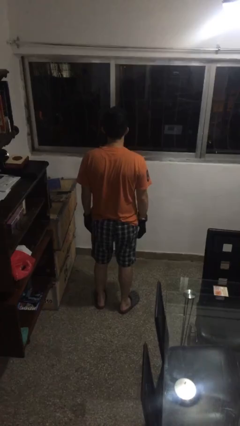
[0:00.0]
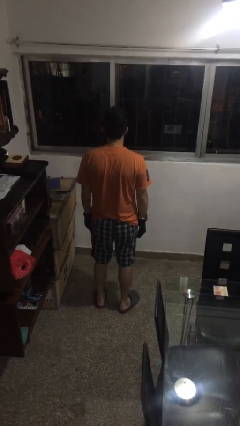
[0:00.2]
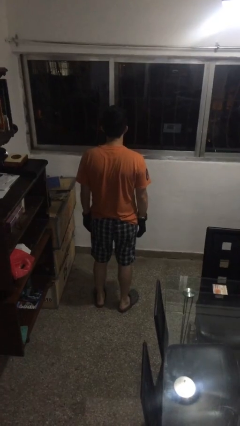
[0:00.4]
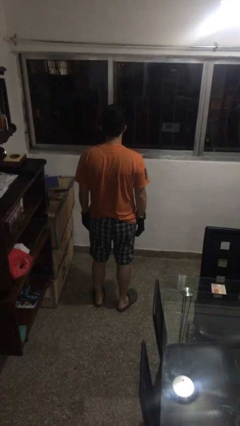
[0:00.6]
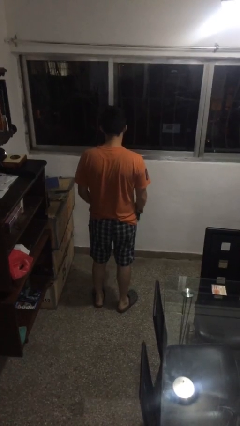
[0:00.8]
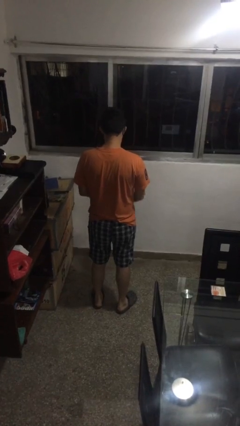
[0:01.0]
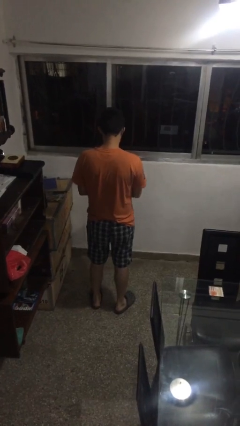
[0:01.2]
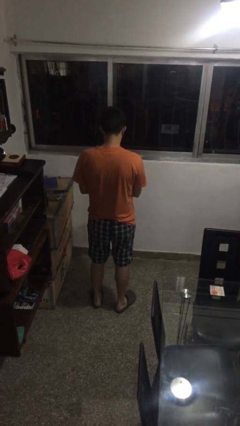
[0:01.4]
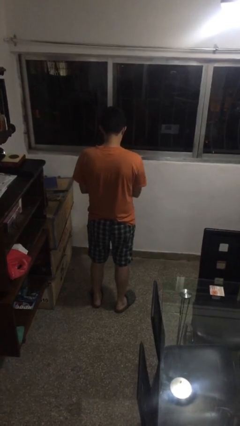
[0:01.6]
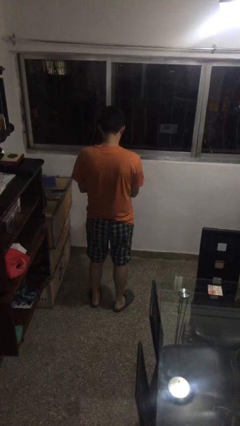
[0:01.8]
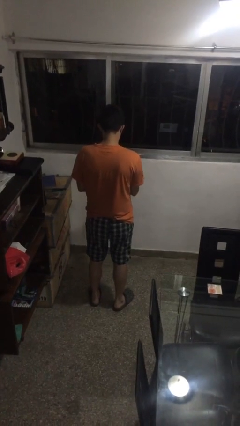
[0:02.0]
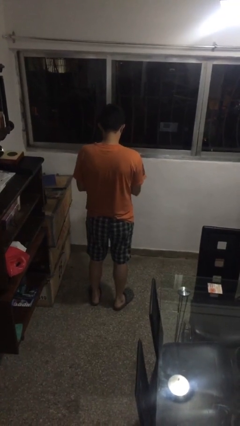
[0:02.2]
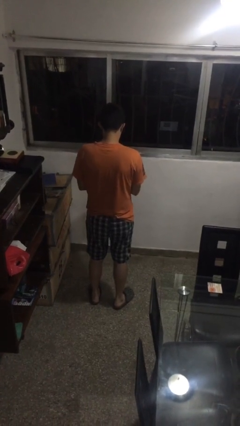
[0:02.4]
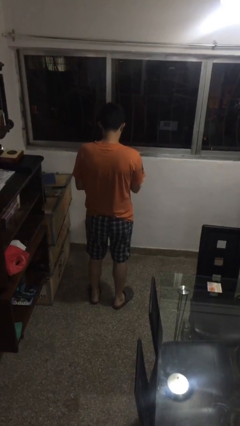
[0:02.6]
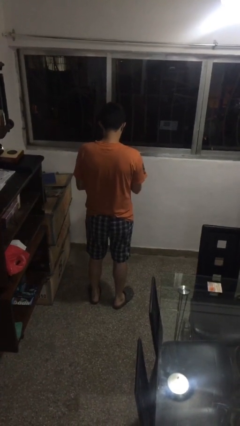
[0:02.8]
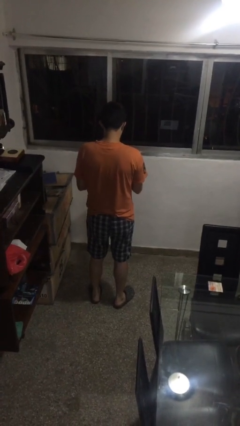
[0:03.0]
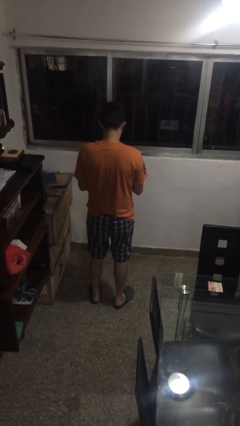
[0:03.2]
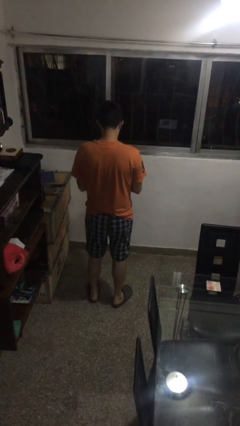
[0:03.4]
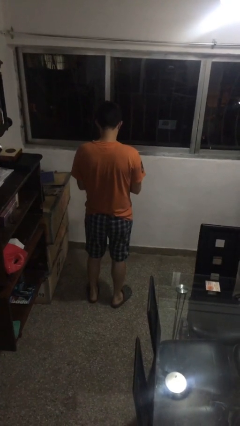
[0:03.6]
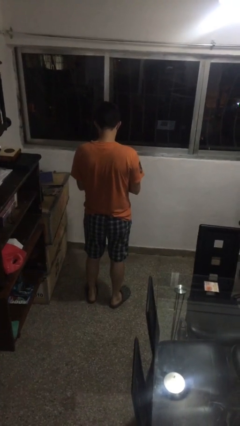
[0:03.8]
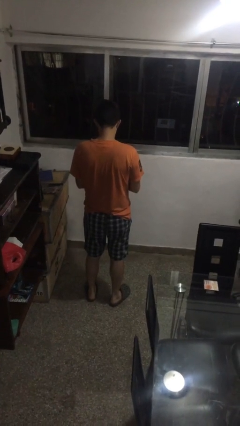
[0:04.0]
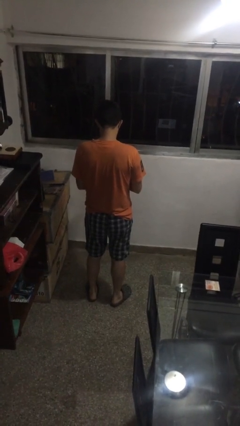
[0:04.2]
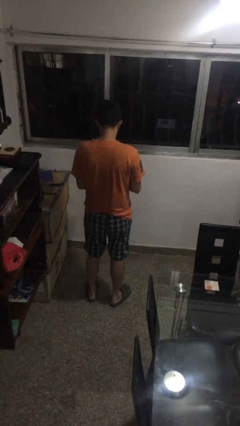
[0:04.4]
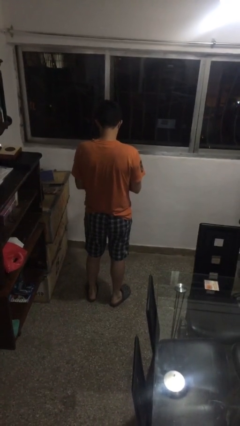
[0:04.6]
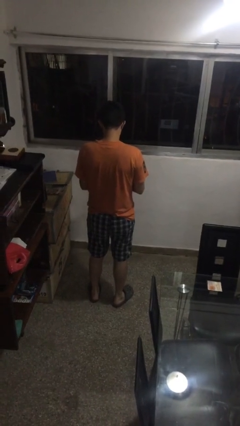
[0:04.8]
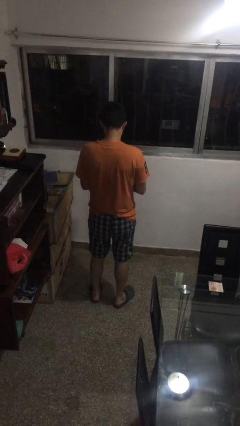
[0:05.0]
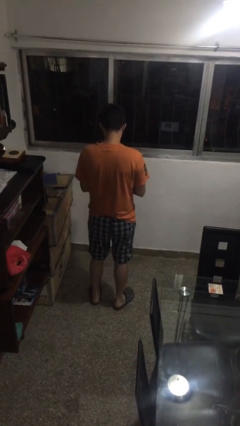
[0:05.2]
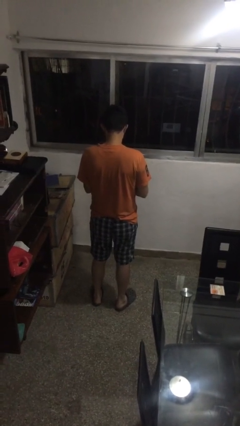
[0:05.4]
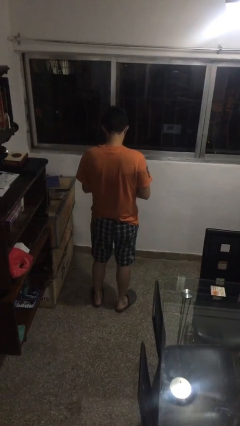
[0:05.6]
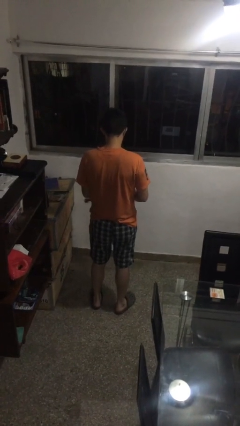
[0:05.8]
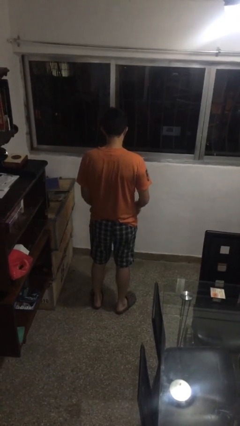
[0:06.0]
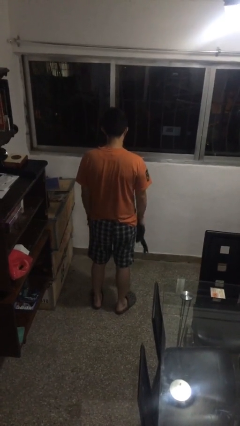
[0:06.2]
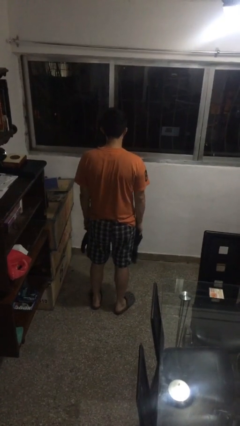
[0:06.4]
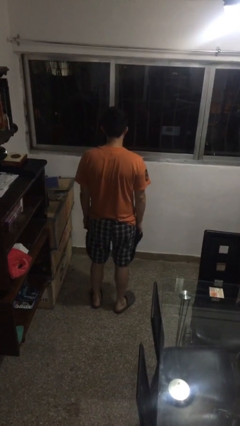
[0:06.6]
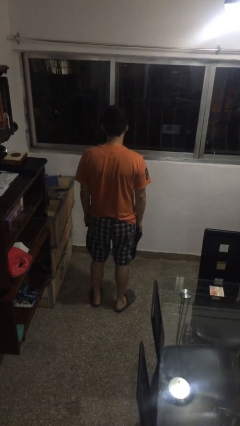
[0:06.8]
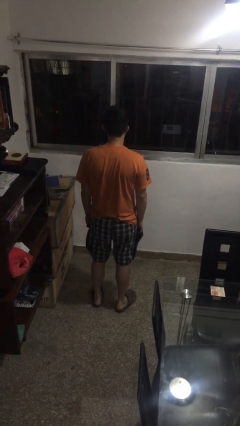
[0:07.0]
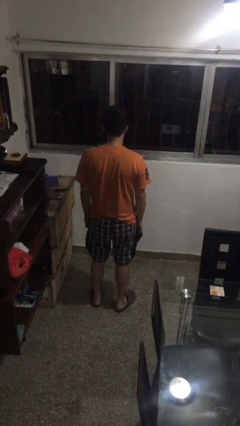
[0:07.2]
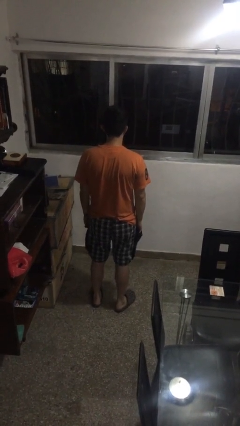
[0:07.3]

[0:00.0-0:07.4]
person takes off gloves

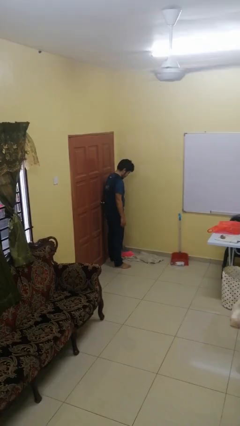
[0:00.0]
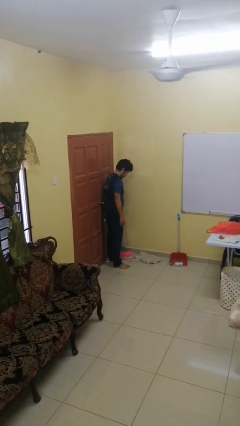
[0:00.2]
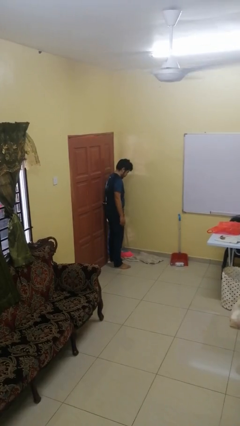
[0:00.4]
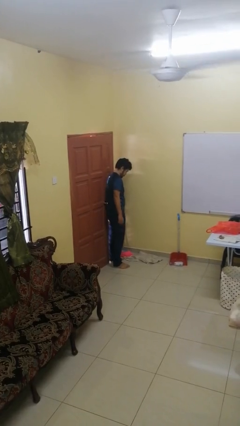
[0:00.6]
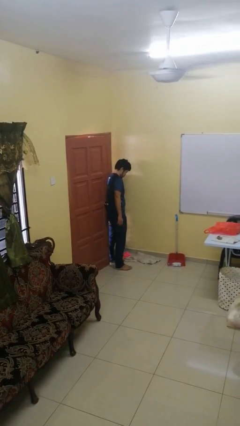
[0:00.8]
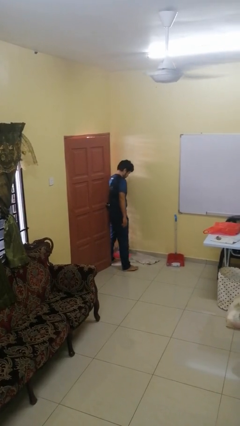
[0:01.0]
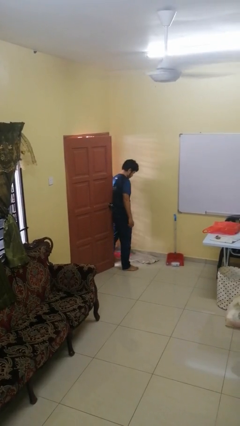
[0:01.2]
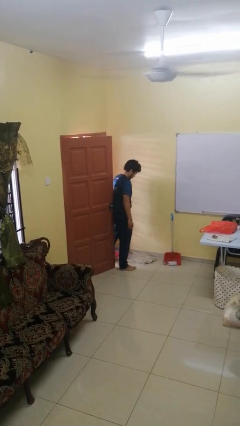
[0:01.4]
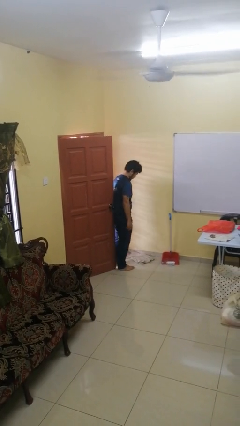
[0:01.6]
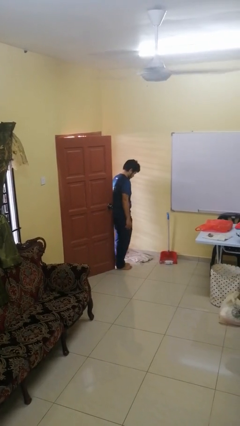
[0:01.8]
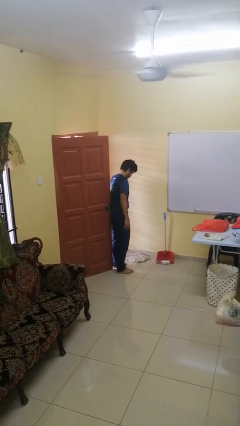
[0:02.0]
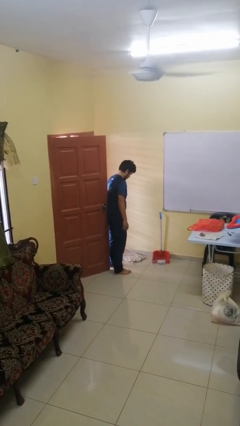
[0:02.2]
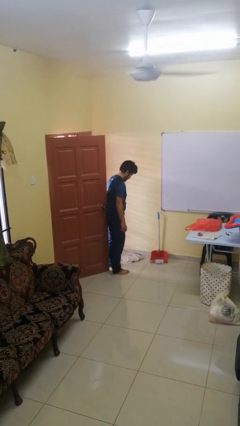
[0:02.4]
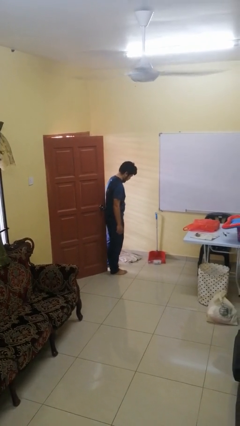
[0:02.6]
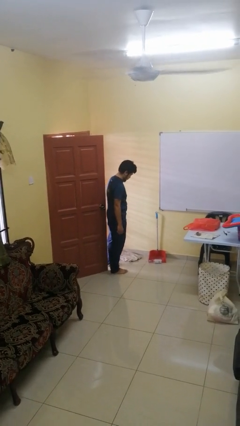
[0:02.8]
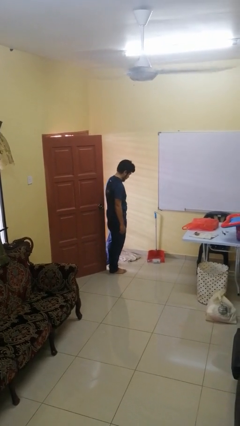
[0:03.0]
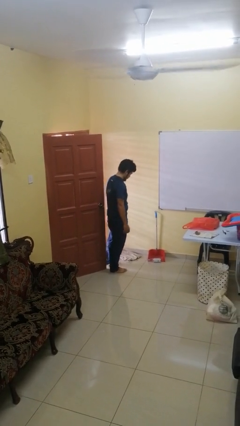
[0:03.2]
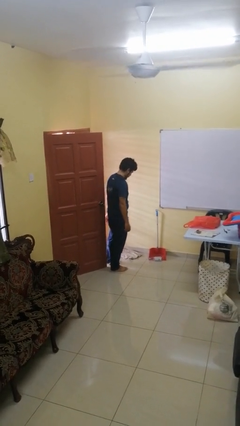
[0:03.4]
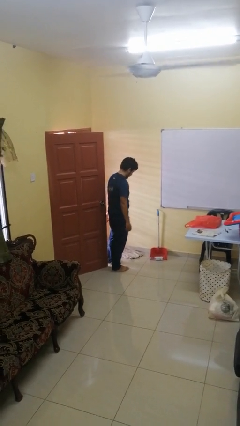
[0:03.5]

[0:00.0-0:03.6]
person opens facility door

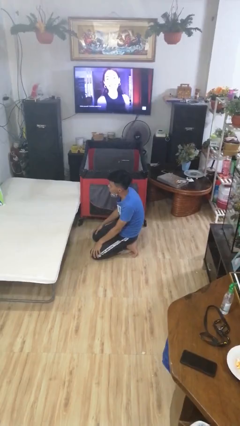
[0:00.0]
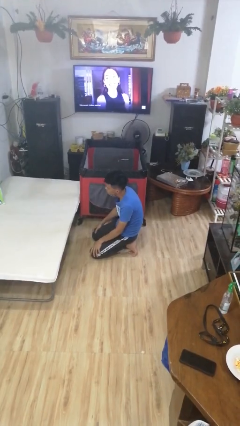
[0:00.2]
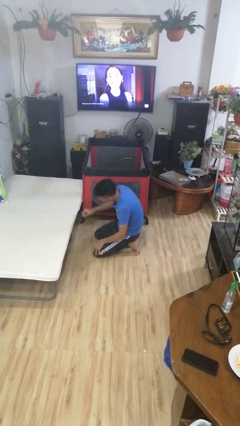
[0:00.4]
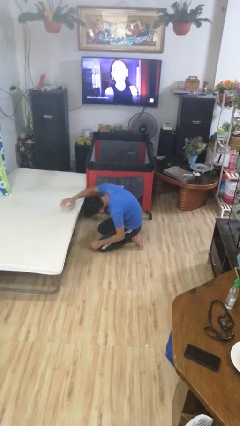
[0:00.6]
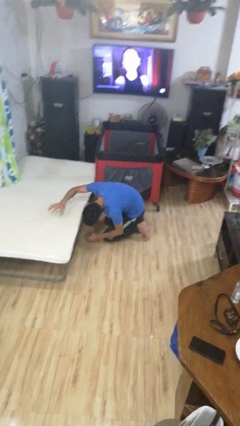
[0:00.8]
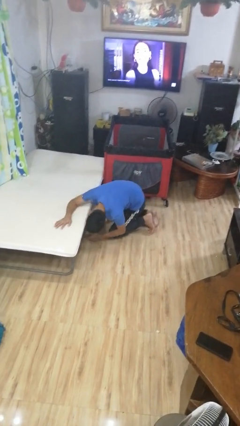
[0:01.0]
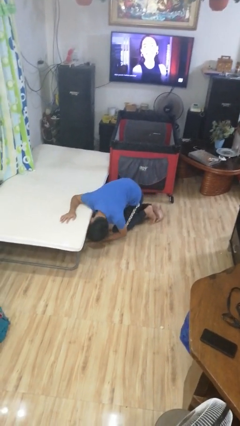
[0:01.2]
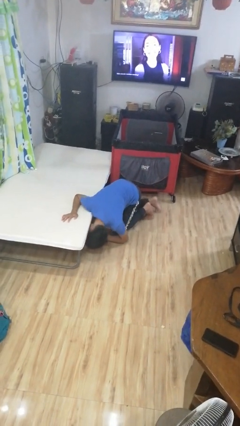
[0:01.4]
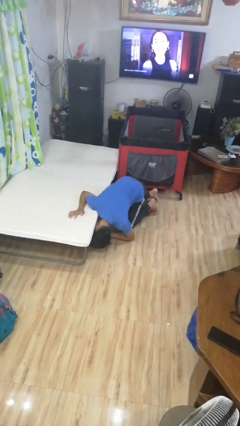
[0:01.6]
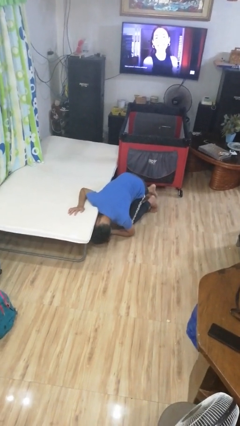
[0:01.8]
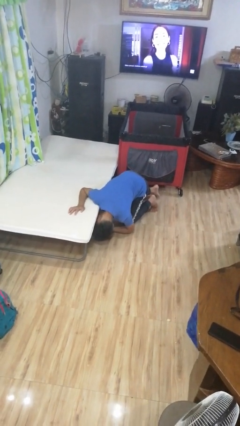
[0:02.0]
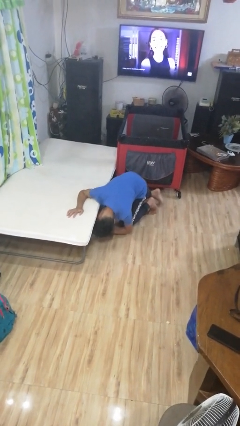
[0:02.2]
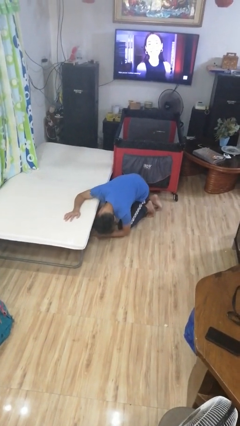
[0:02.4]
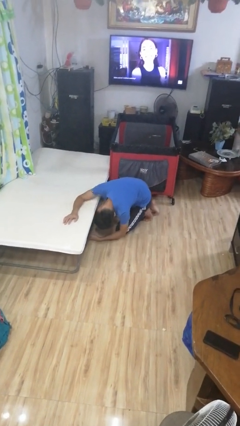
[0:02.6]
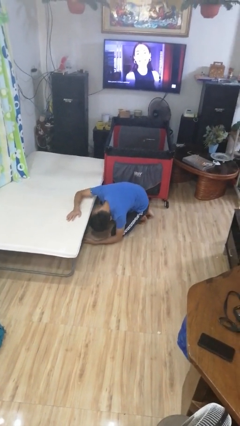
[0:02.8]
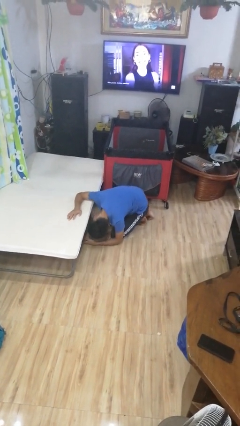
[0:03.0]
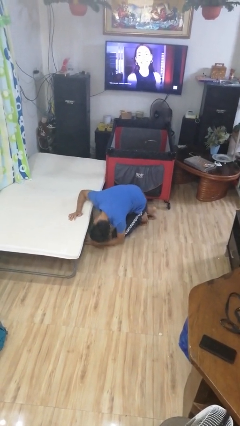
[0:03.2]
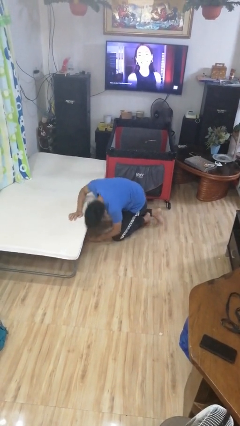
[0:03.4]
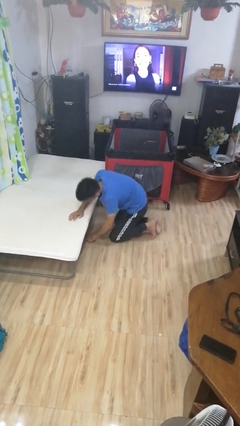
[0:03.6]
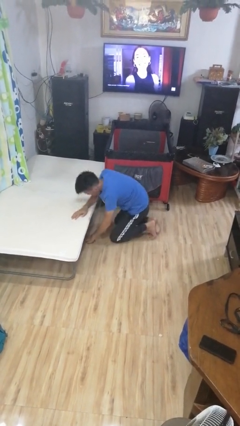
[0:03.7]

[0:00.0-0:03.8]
person searches under bed

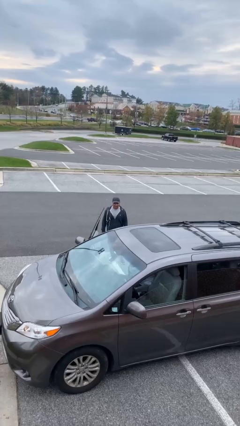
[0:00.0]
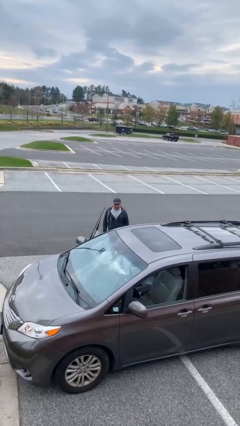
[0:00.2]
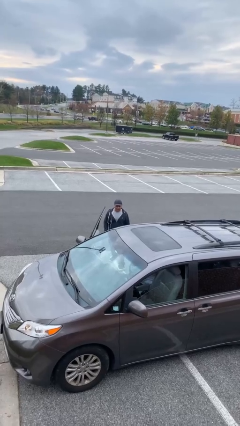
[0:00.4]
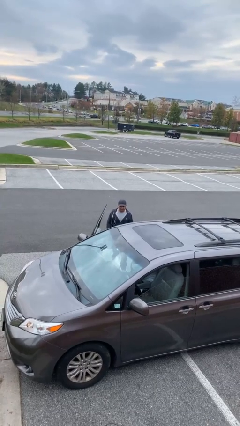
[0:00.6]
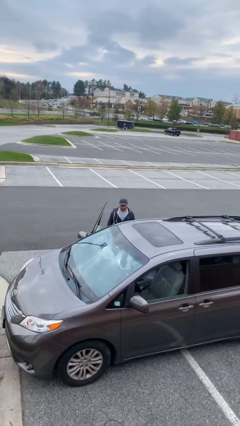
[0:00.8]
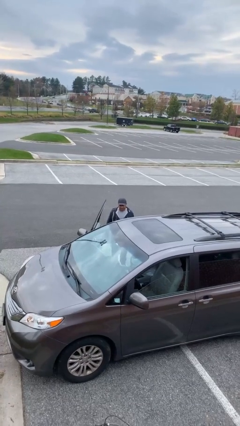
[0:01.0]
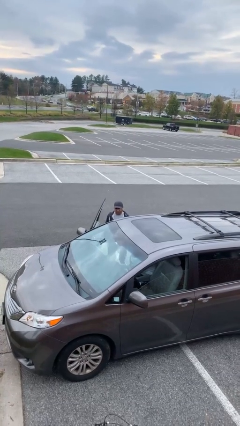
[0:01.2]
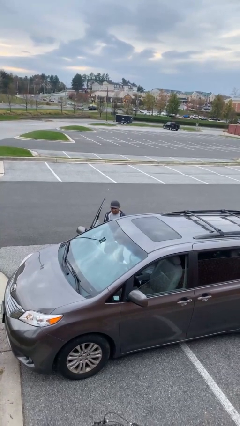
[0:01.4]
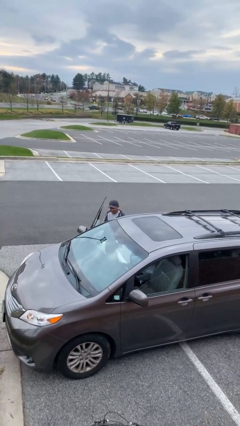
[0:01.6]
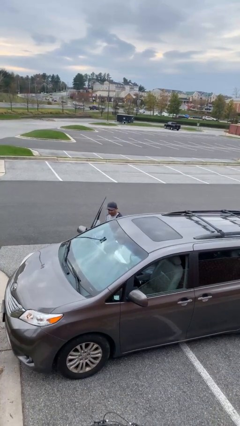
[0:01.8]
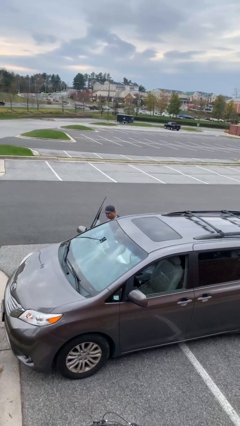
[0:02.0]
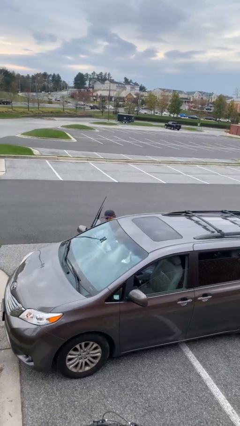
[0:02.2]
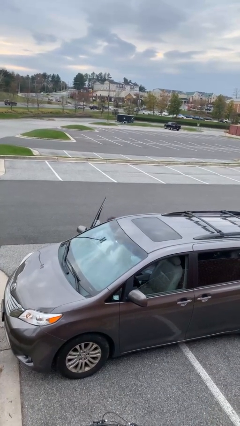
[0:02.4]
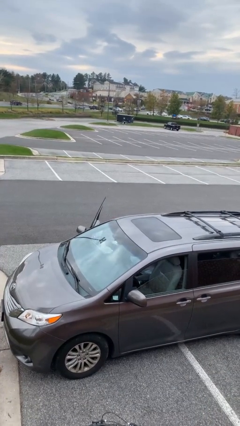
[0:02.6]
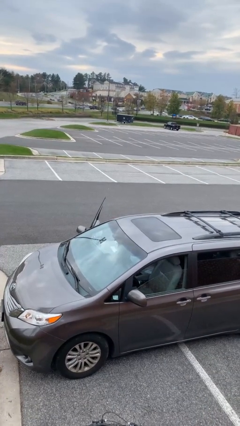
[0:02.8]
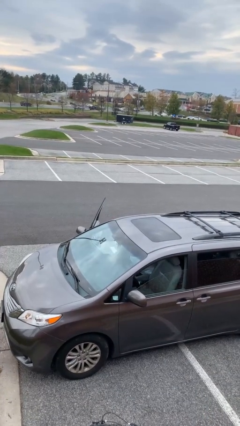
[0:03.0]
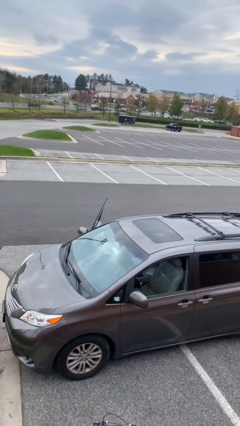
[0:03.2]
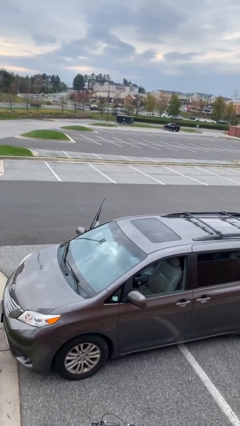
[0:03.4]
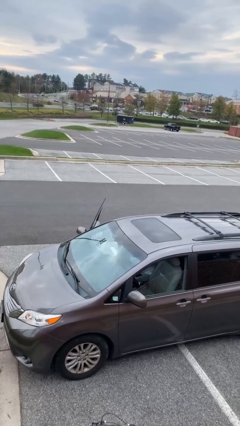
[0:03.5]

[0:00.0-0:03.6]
person enters car
